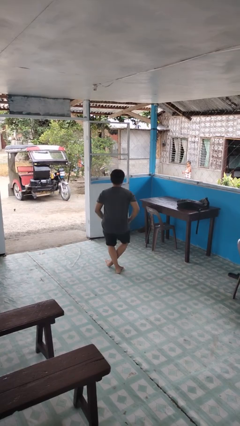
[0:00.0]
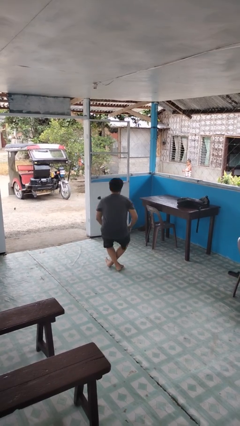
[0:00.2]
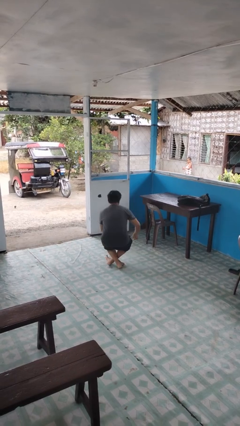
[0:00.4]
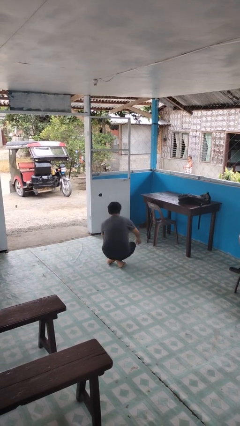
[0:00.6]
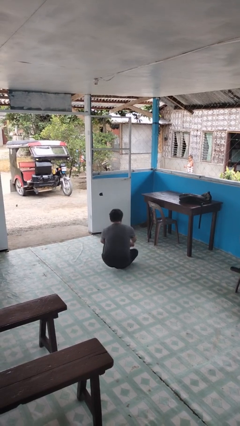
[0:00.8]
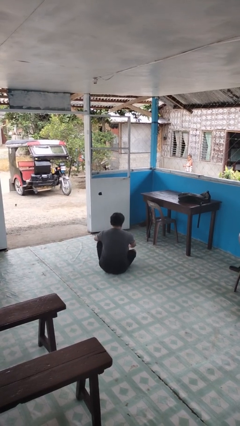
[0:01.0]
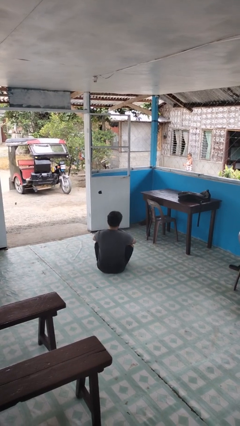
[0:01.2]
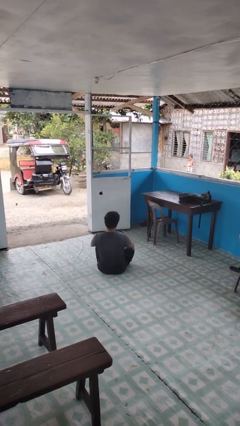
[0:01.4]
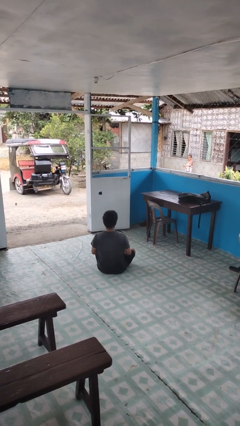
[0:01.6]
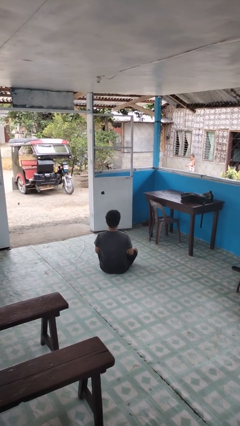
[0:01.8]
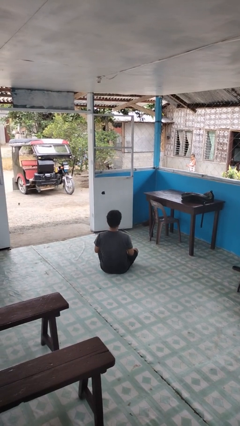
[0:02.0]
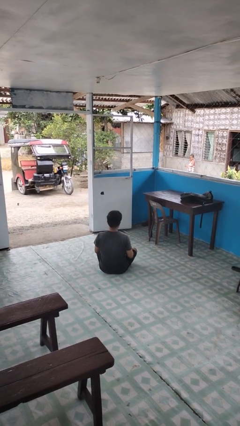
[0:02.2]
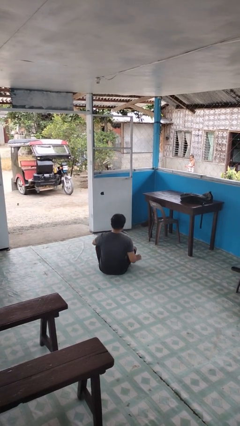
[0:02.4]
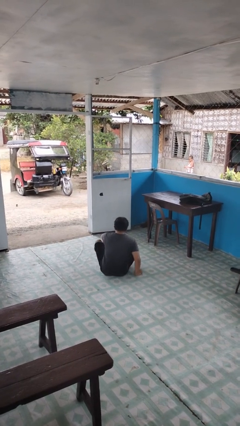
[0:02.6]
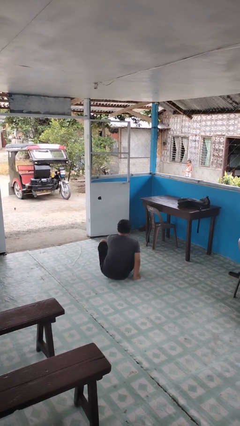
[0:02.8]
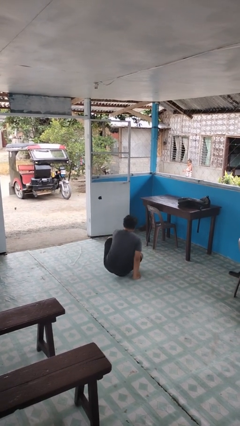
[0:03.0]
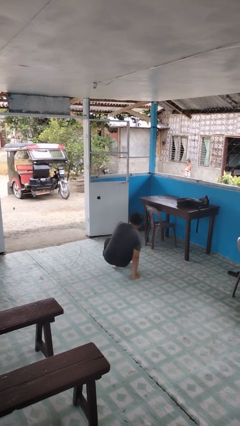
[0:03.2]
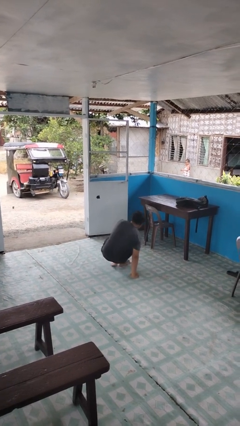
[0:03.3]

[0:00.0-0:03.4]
person sits crisscross

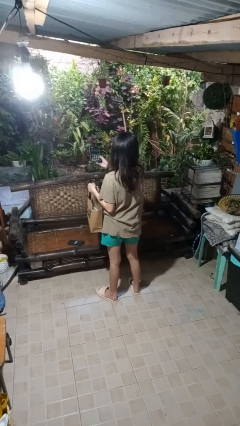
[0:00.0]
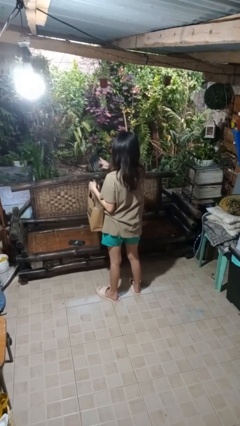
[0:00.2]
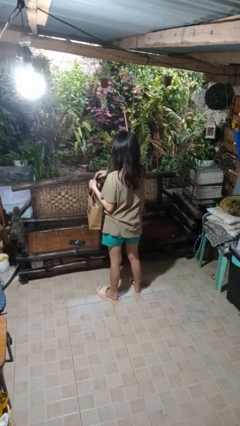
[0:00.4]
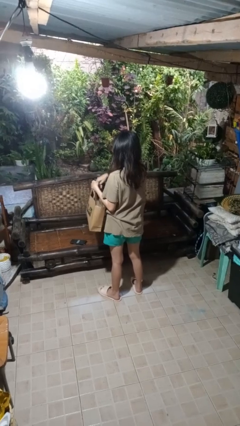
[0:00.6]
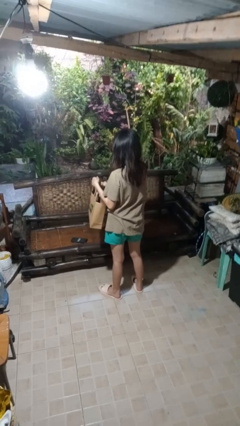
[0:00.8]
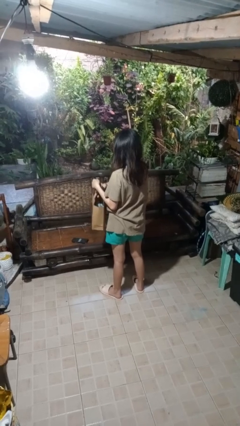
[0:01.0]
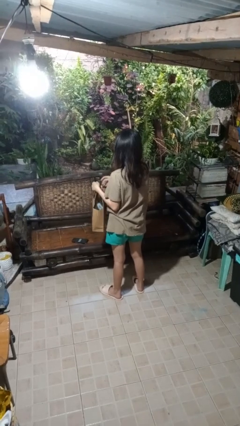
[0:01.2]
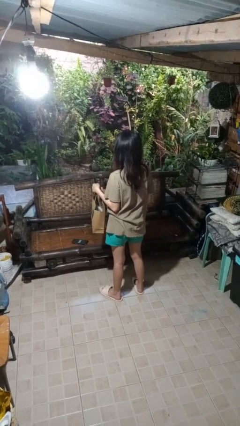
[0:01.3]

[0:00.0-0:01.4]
person puts object into bag

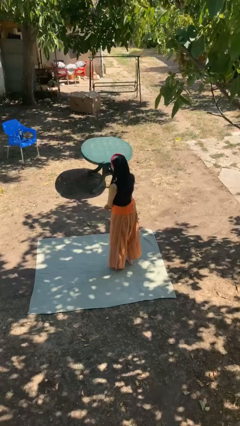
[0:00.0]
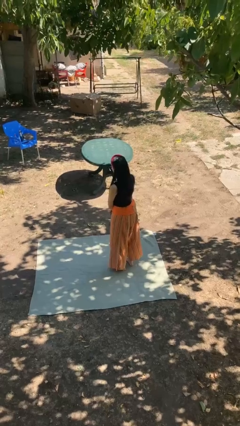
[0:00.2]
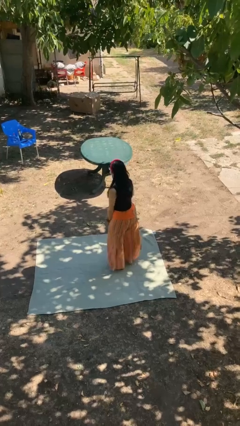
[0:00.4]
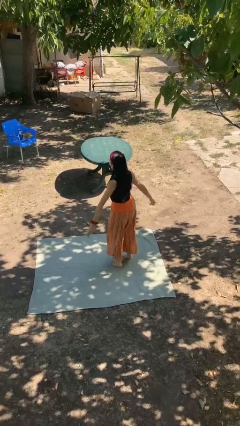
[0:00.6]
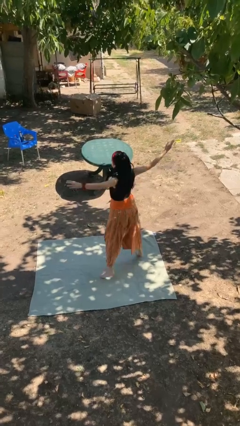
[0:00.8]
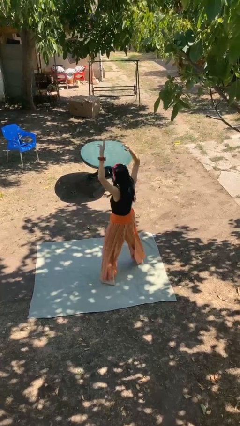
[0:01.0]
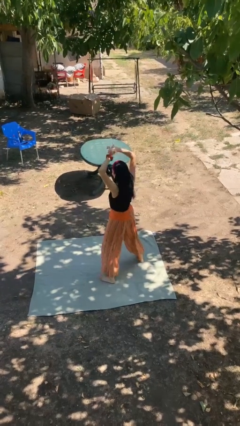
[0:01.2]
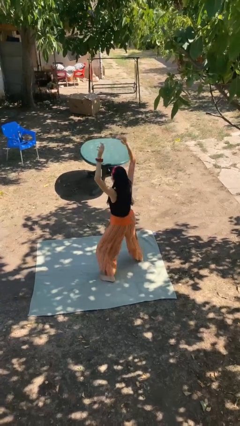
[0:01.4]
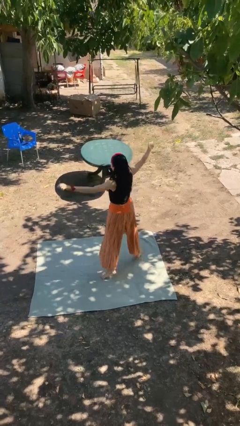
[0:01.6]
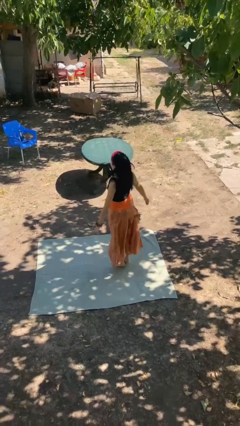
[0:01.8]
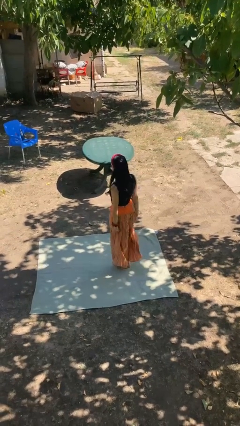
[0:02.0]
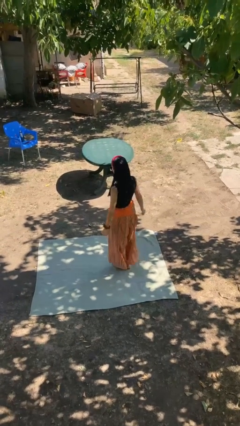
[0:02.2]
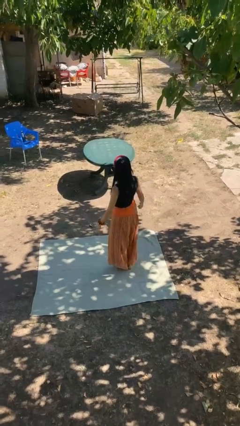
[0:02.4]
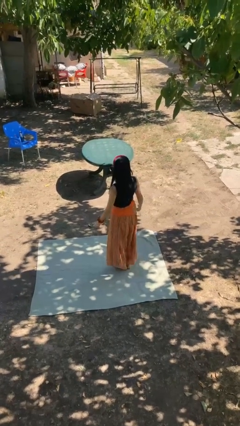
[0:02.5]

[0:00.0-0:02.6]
person exercises with jumping jacks

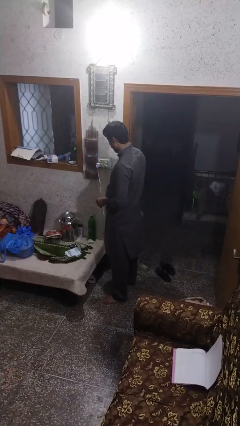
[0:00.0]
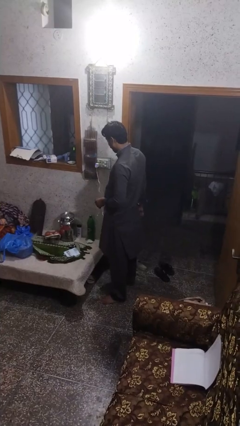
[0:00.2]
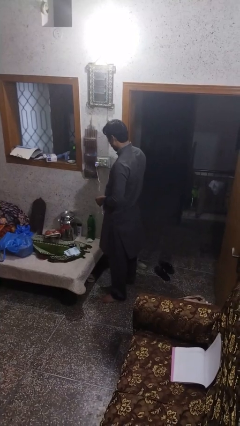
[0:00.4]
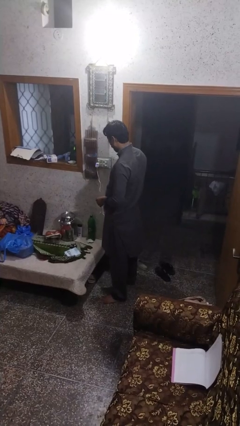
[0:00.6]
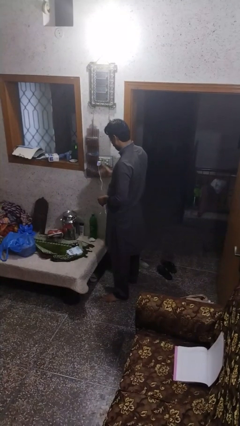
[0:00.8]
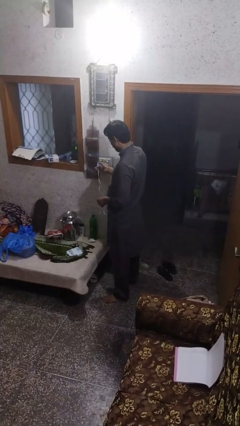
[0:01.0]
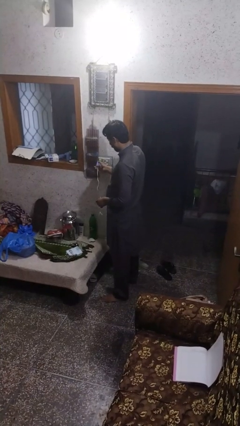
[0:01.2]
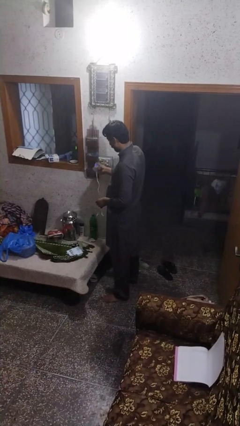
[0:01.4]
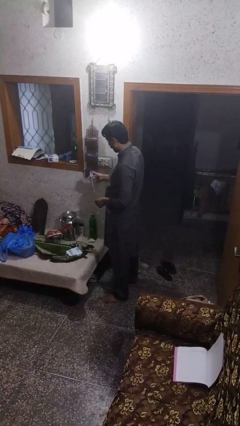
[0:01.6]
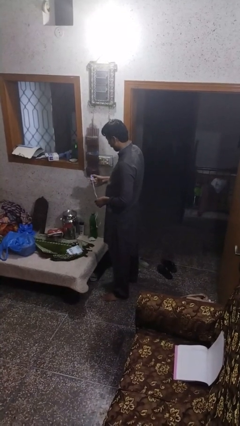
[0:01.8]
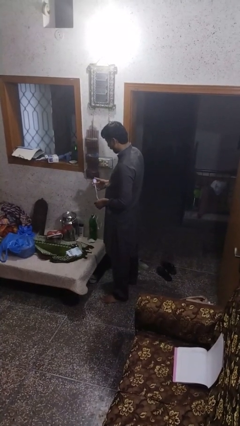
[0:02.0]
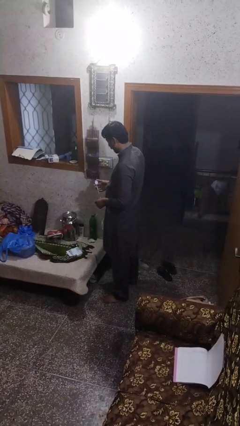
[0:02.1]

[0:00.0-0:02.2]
person unplugs from electrical socket

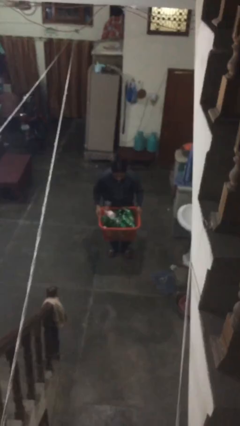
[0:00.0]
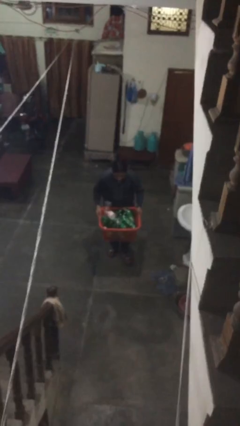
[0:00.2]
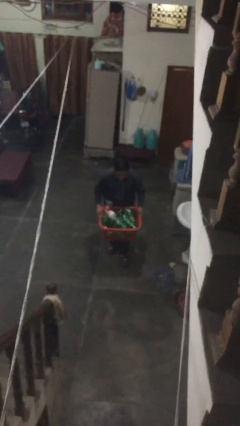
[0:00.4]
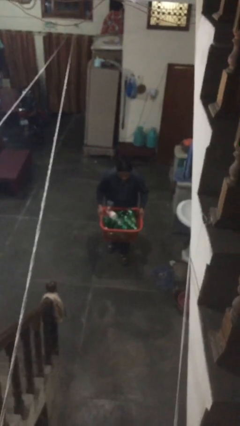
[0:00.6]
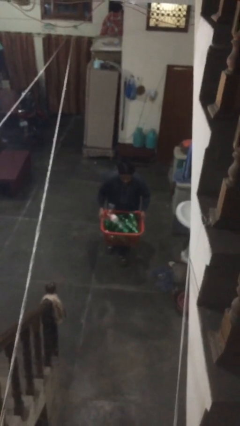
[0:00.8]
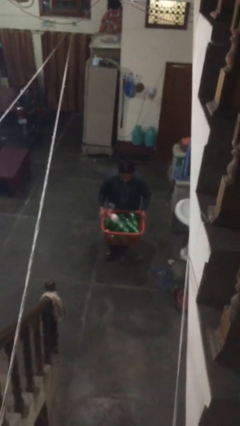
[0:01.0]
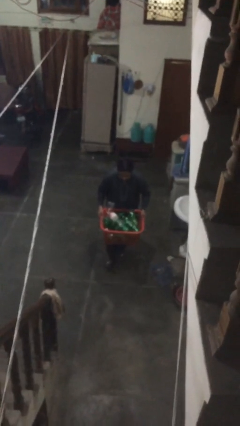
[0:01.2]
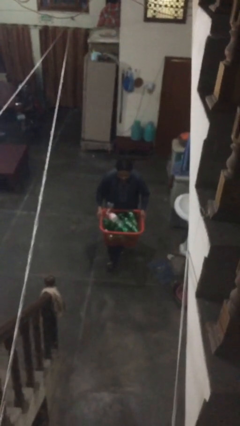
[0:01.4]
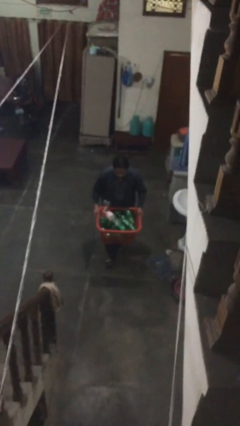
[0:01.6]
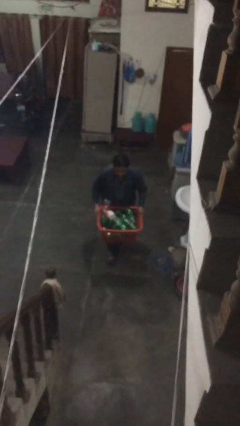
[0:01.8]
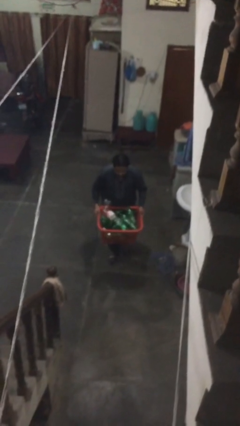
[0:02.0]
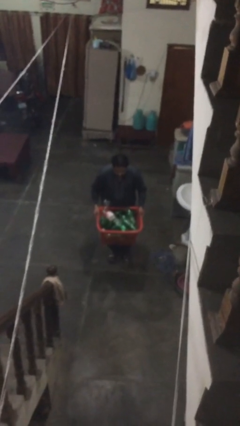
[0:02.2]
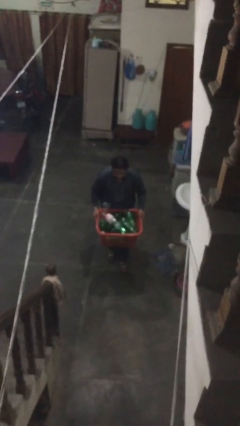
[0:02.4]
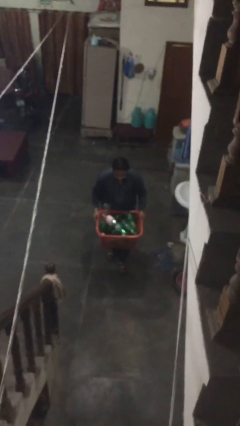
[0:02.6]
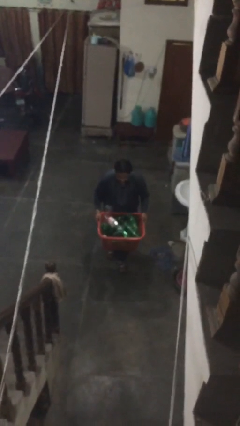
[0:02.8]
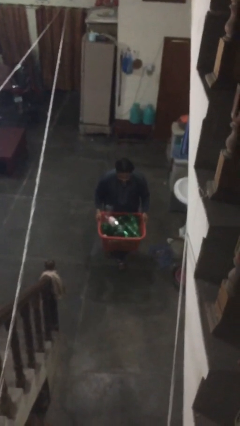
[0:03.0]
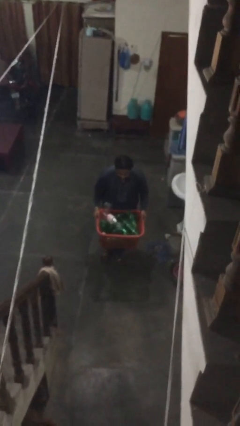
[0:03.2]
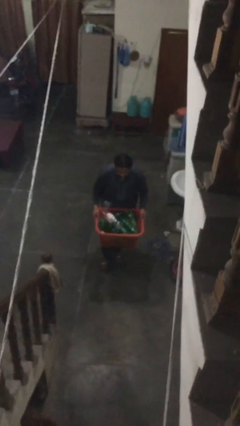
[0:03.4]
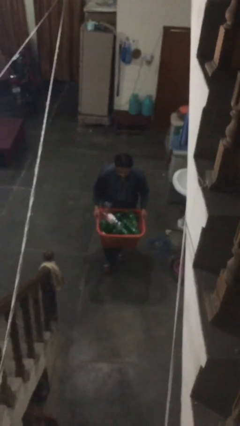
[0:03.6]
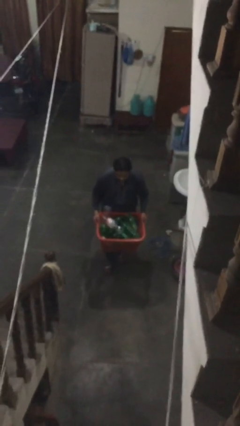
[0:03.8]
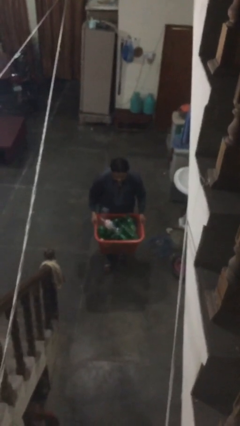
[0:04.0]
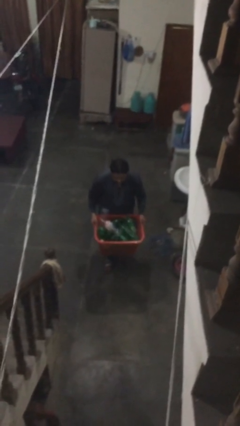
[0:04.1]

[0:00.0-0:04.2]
person carries heavy object

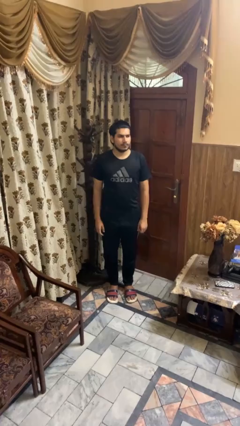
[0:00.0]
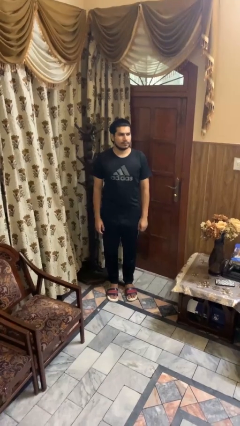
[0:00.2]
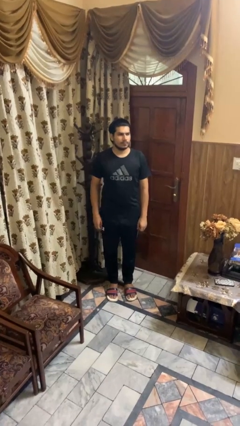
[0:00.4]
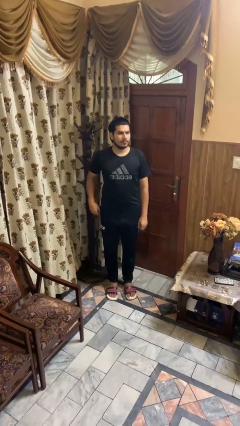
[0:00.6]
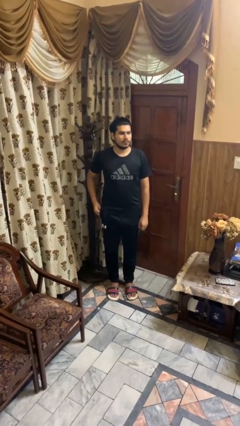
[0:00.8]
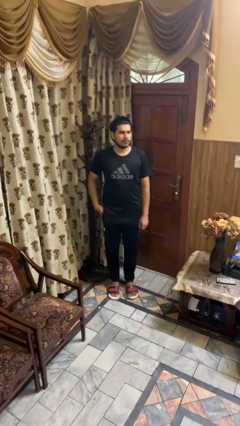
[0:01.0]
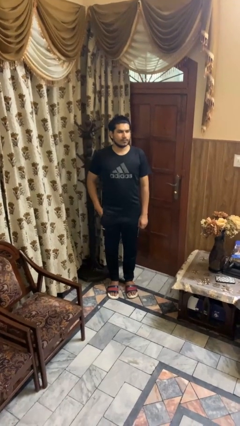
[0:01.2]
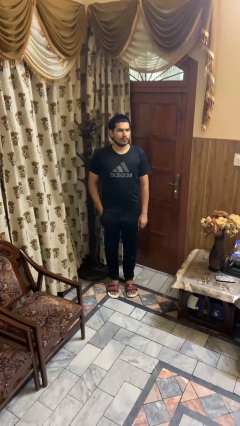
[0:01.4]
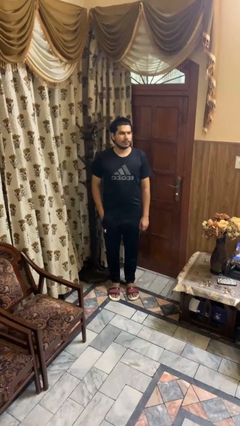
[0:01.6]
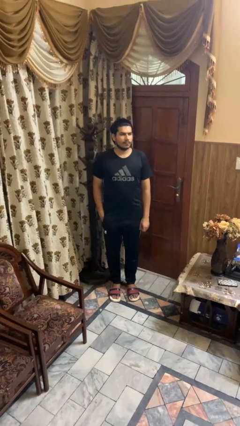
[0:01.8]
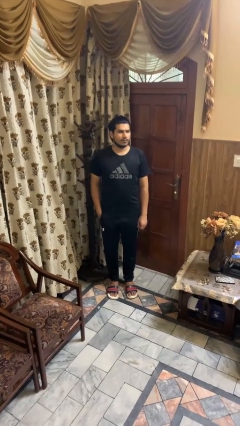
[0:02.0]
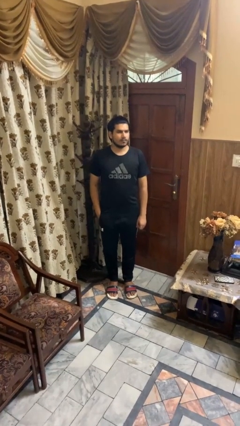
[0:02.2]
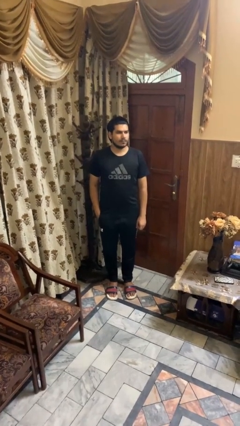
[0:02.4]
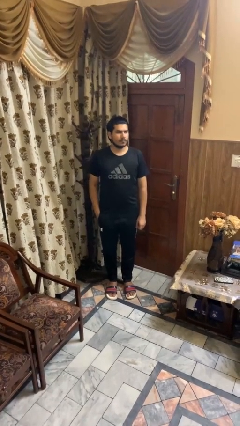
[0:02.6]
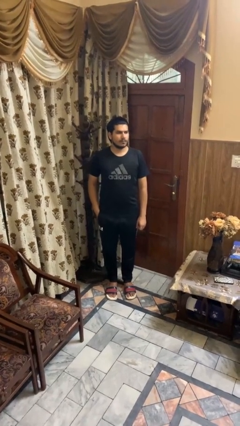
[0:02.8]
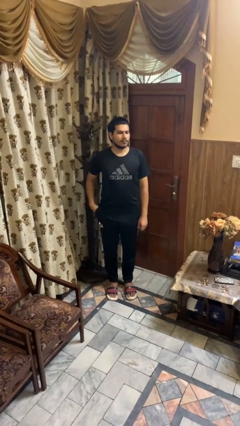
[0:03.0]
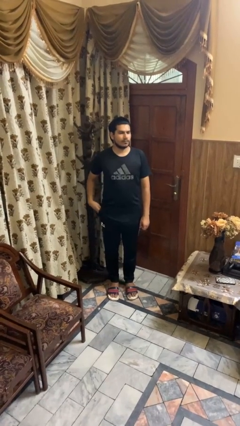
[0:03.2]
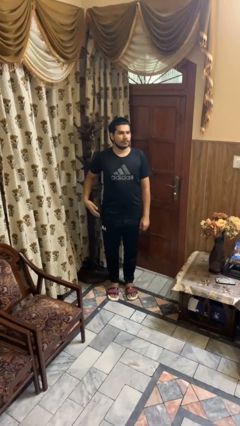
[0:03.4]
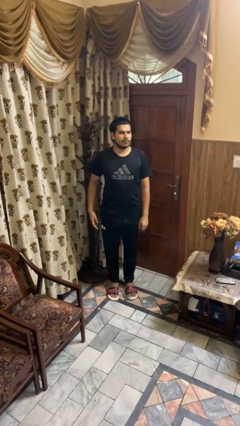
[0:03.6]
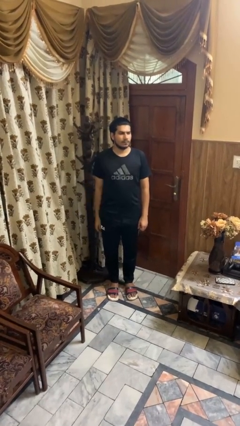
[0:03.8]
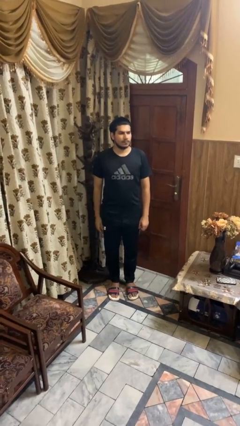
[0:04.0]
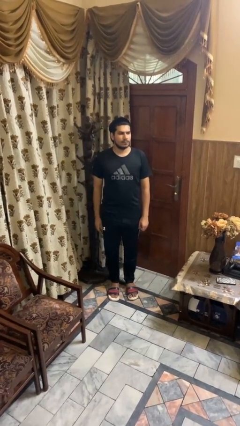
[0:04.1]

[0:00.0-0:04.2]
person puts hands in back pockets
